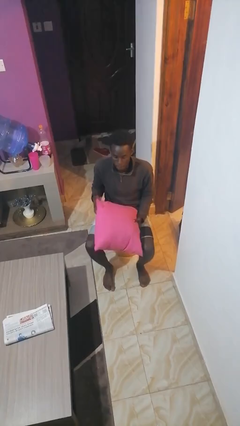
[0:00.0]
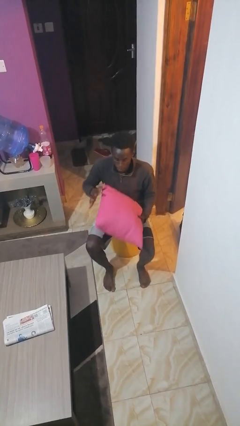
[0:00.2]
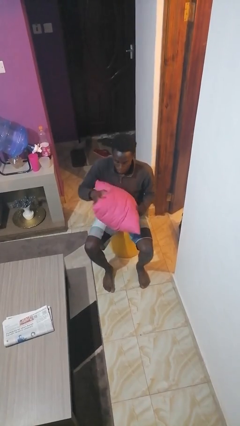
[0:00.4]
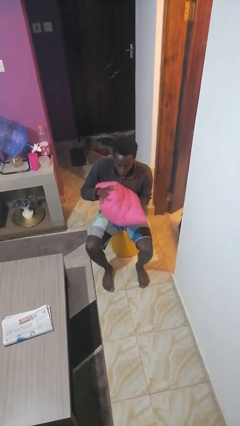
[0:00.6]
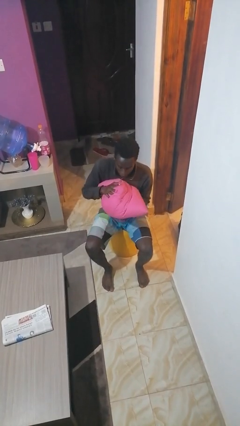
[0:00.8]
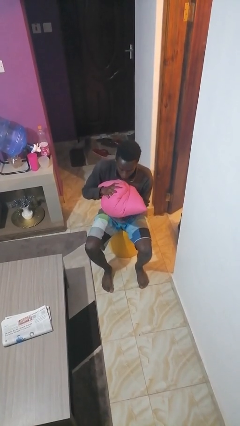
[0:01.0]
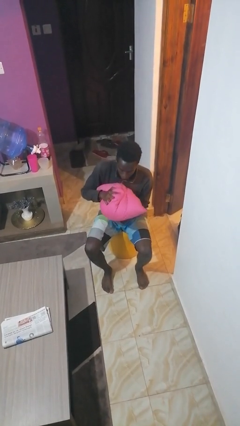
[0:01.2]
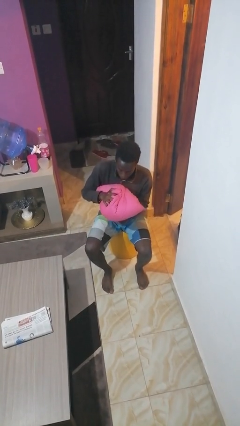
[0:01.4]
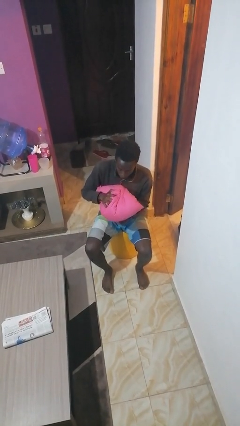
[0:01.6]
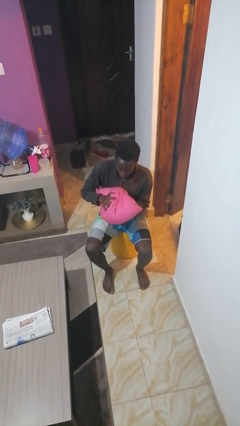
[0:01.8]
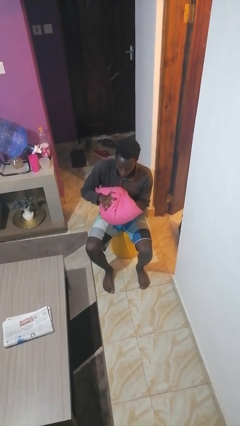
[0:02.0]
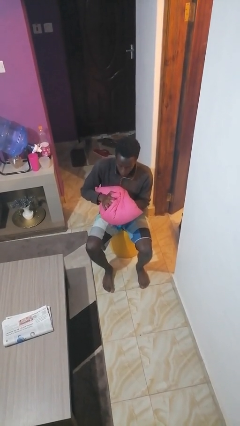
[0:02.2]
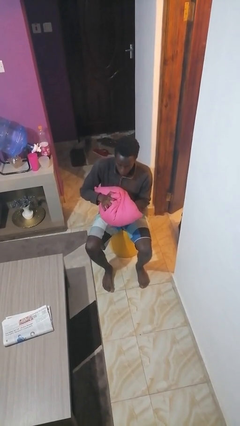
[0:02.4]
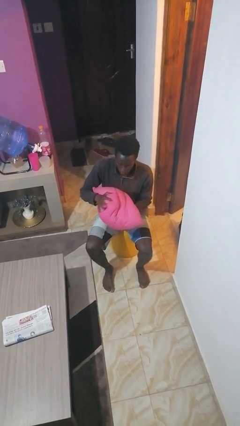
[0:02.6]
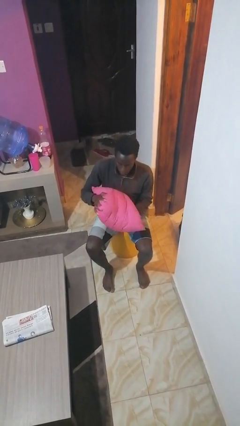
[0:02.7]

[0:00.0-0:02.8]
person squeezes object

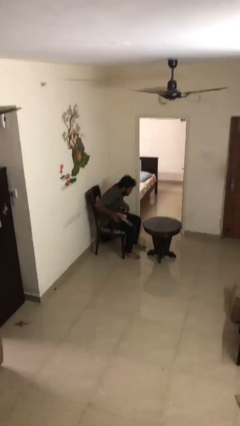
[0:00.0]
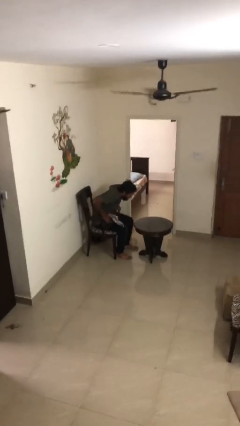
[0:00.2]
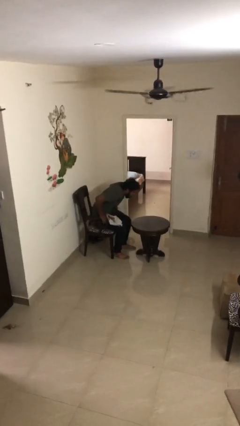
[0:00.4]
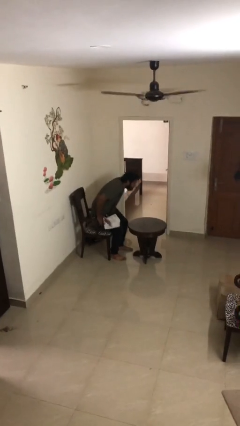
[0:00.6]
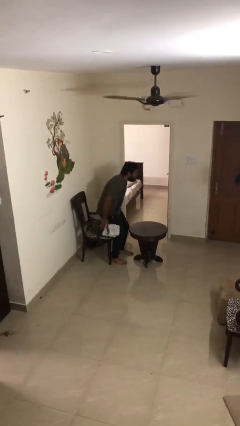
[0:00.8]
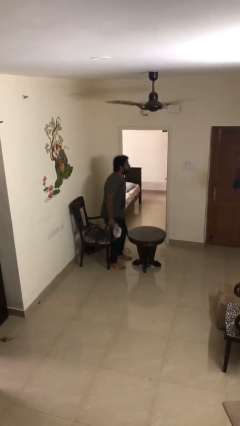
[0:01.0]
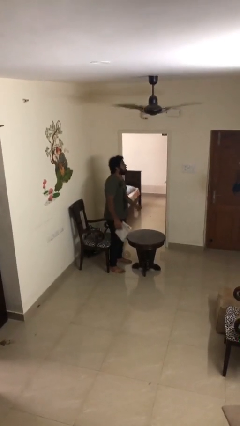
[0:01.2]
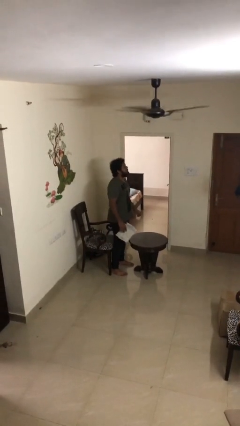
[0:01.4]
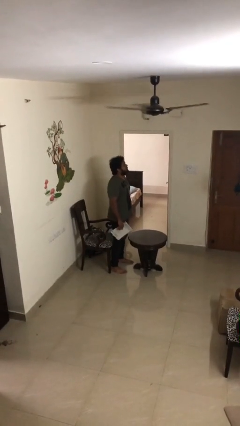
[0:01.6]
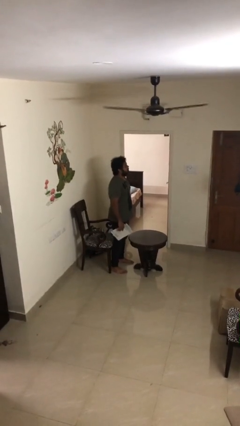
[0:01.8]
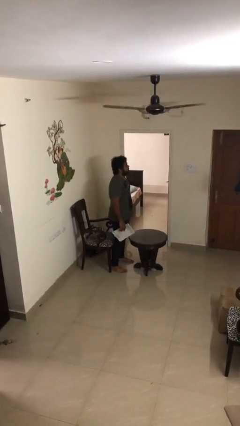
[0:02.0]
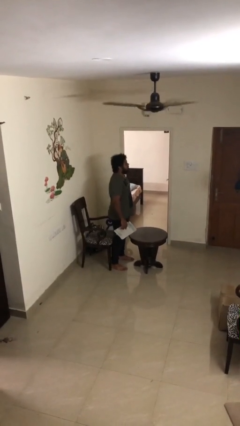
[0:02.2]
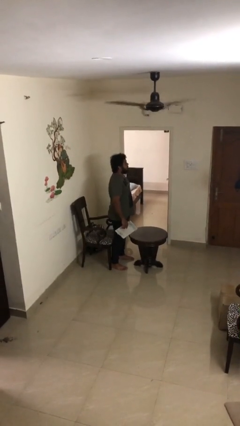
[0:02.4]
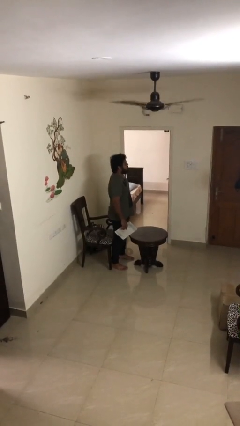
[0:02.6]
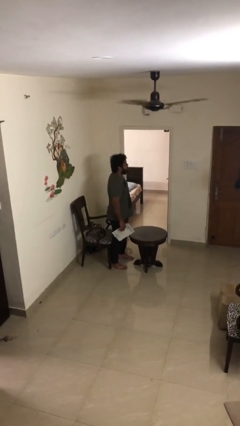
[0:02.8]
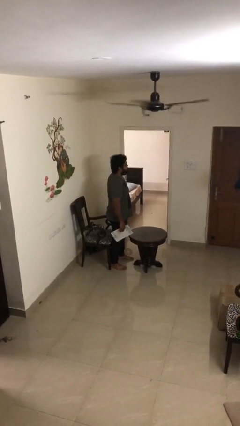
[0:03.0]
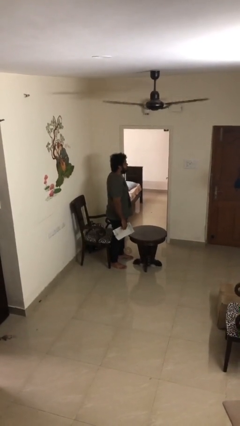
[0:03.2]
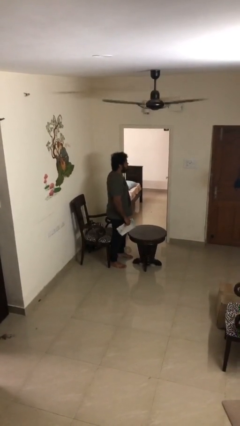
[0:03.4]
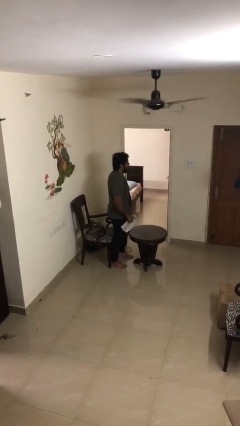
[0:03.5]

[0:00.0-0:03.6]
person stands up

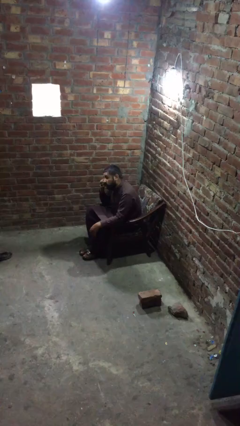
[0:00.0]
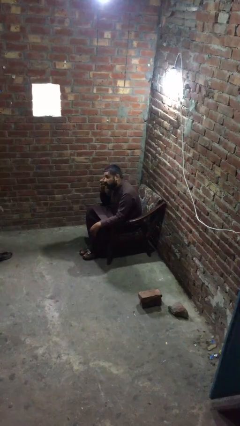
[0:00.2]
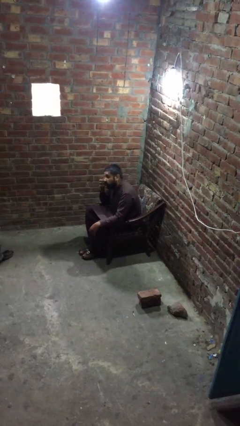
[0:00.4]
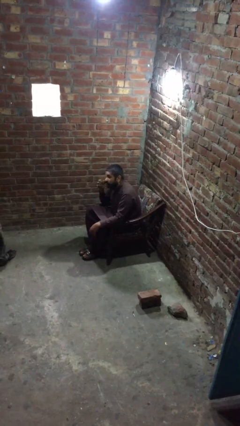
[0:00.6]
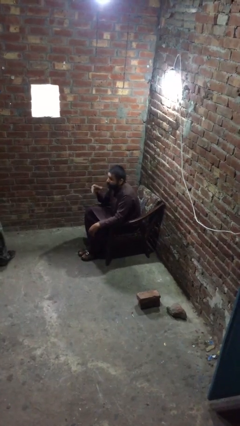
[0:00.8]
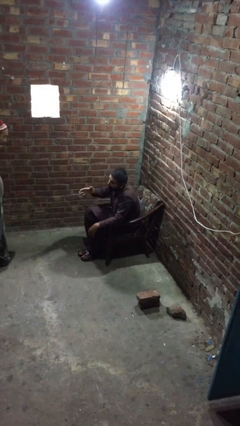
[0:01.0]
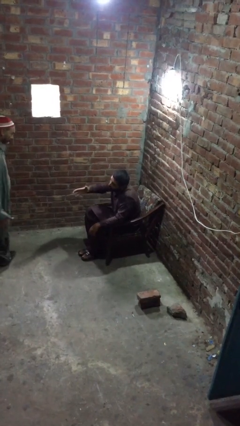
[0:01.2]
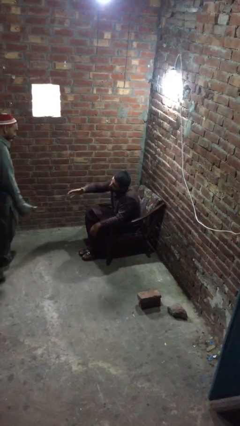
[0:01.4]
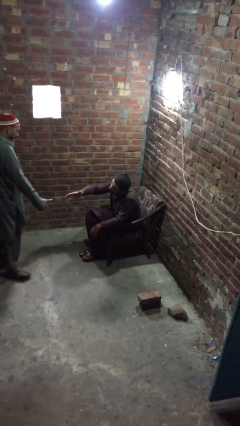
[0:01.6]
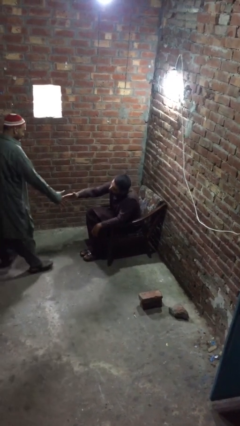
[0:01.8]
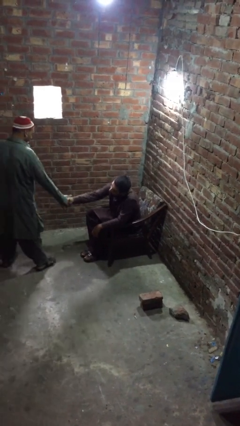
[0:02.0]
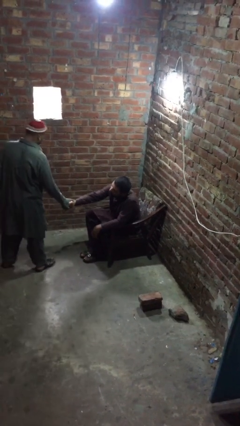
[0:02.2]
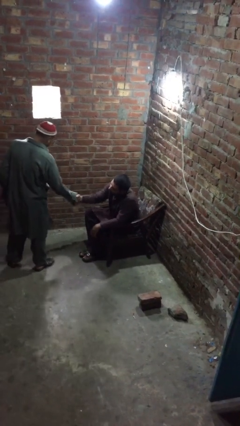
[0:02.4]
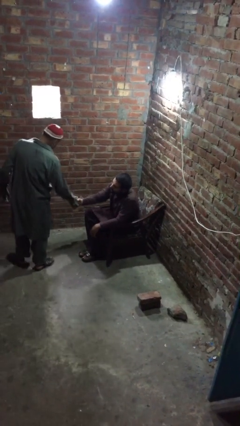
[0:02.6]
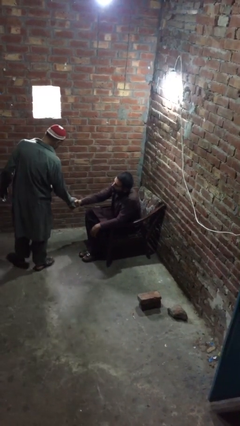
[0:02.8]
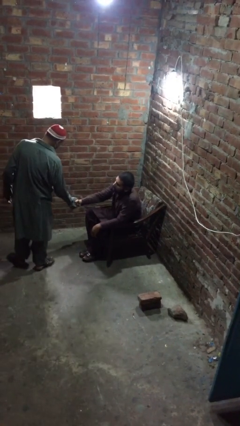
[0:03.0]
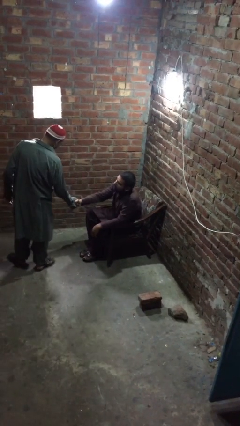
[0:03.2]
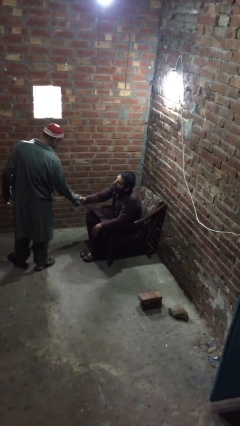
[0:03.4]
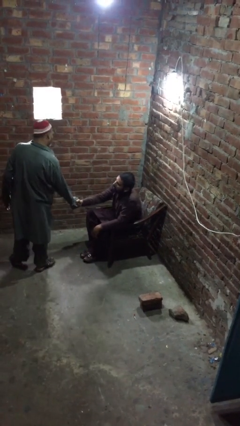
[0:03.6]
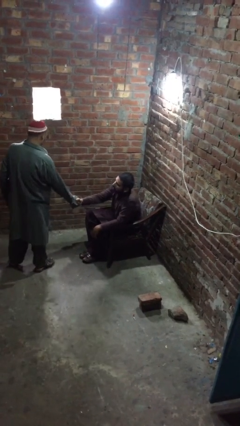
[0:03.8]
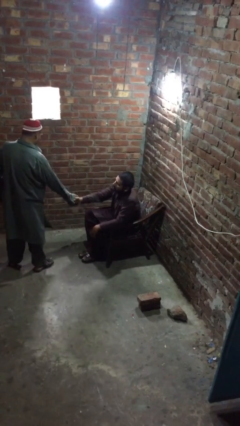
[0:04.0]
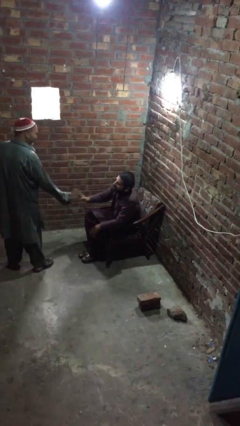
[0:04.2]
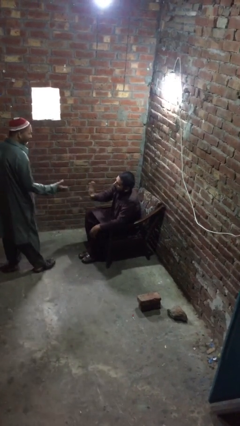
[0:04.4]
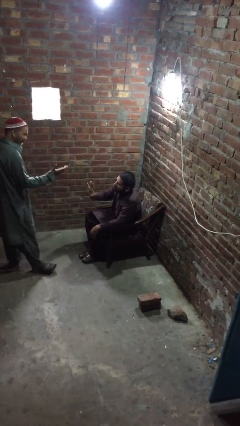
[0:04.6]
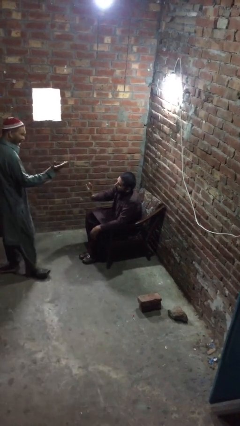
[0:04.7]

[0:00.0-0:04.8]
person shakes hand

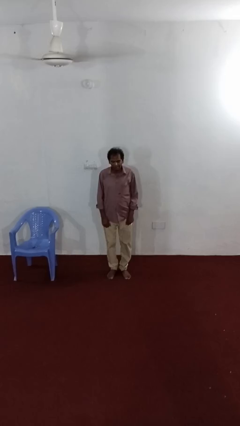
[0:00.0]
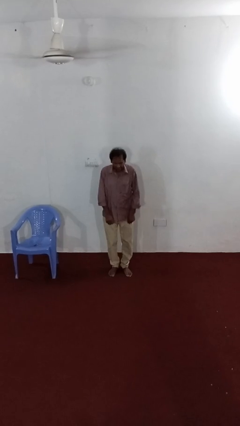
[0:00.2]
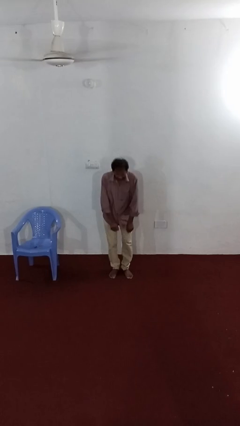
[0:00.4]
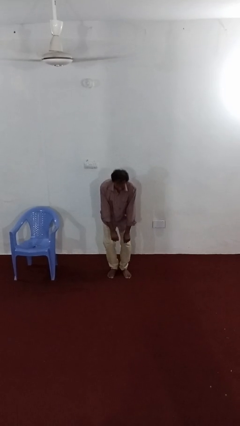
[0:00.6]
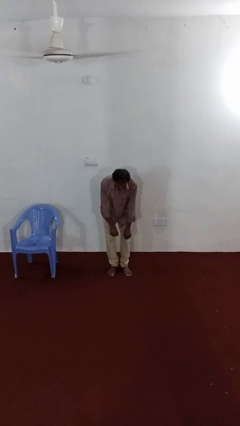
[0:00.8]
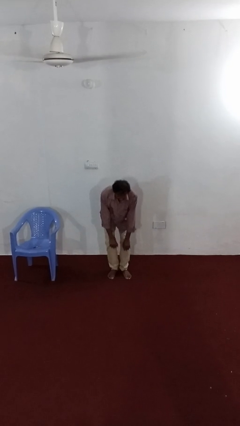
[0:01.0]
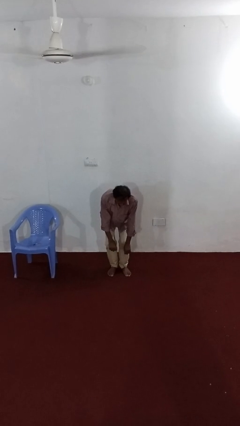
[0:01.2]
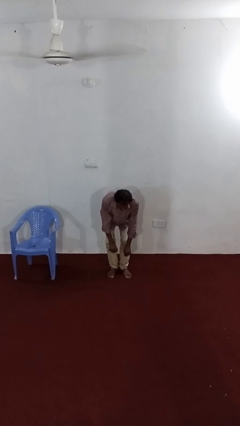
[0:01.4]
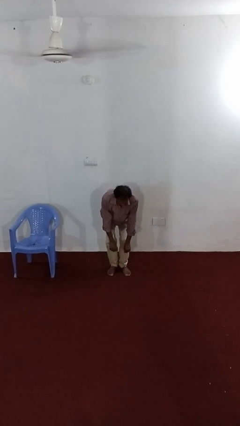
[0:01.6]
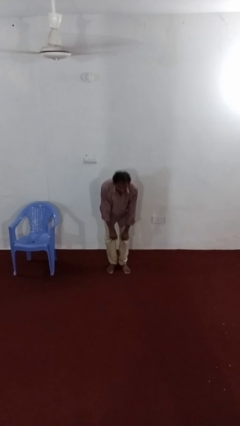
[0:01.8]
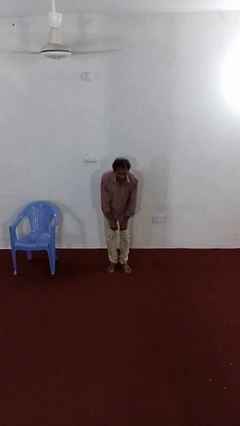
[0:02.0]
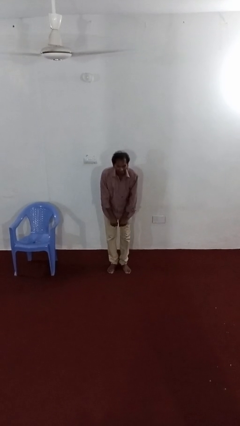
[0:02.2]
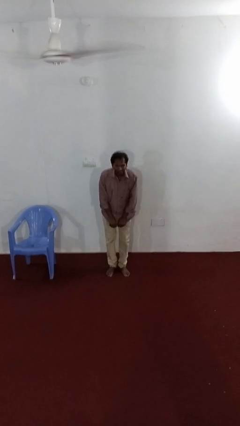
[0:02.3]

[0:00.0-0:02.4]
person dances in place

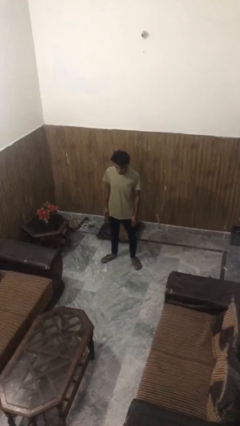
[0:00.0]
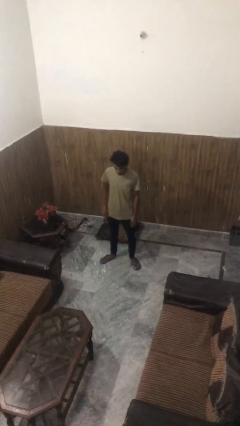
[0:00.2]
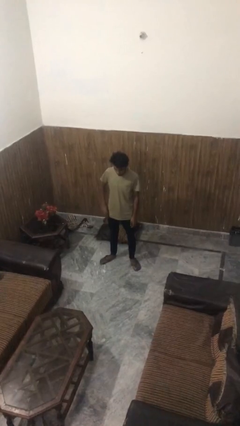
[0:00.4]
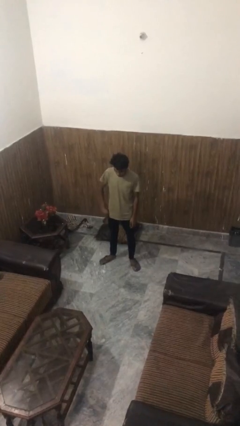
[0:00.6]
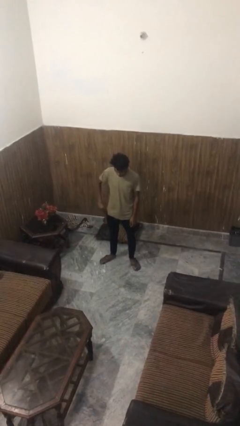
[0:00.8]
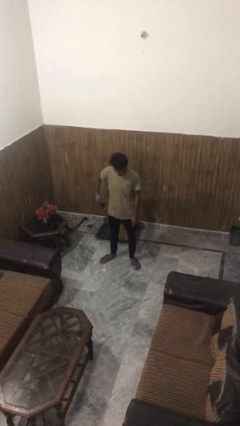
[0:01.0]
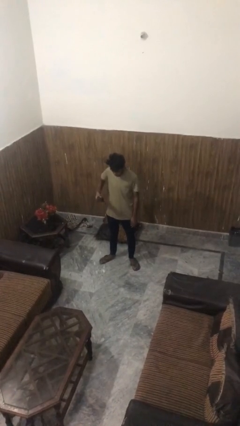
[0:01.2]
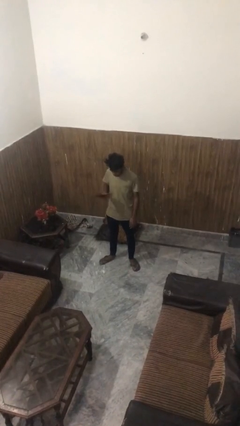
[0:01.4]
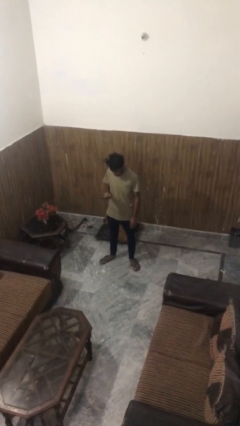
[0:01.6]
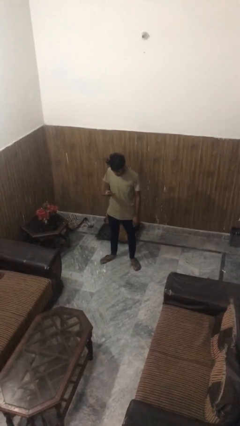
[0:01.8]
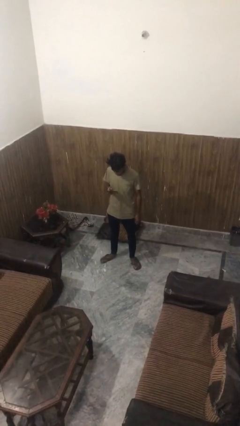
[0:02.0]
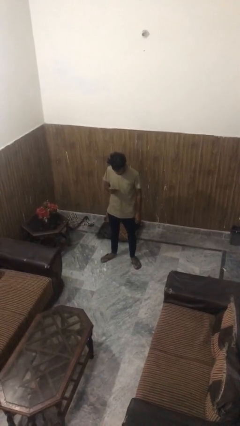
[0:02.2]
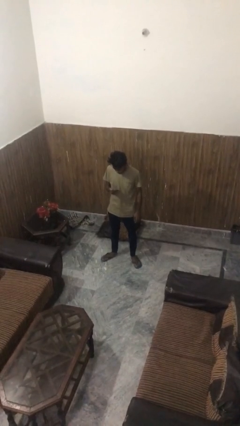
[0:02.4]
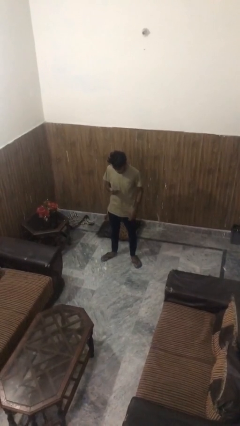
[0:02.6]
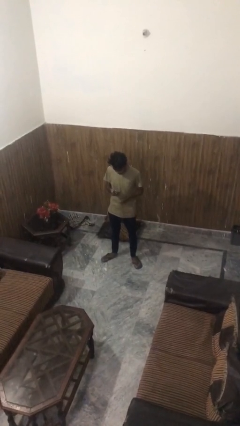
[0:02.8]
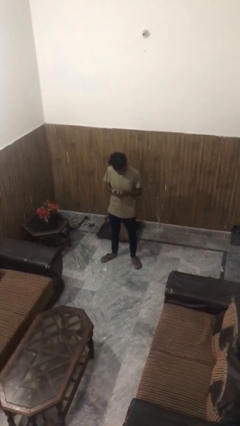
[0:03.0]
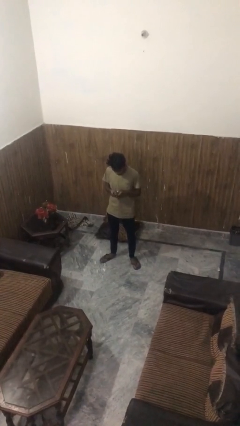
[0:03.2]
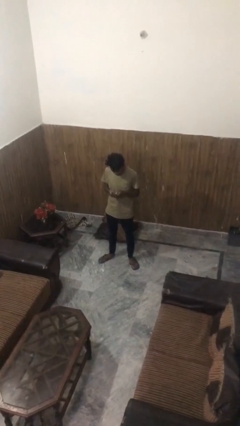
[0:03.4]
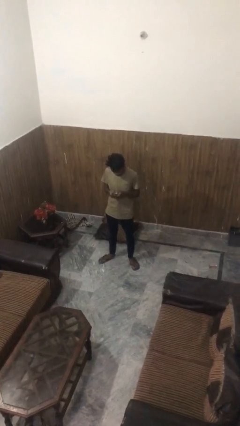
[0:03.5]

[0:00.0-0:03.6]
person takes phone from pocket

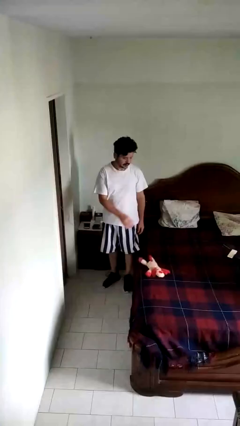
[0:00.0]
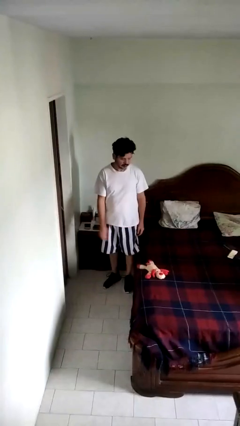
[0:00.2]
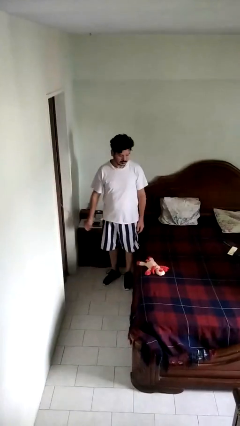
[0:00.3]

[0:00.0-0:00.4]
person throws object on bed

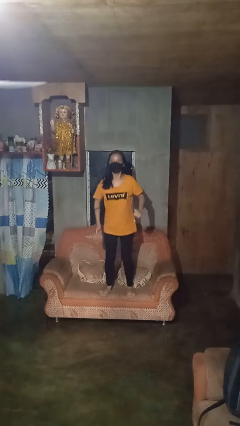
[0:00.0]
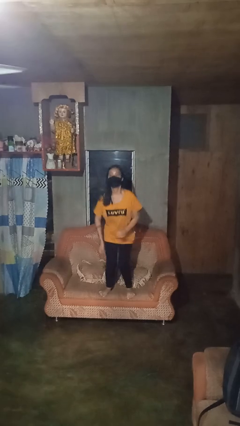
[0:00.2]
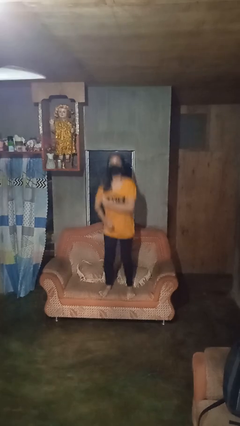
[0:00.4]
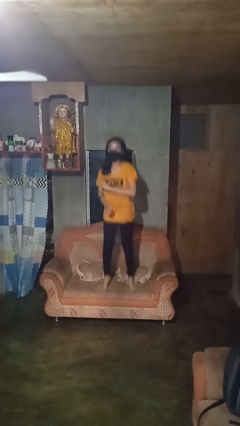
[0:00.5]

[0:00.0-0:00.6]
person jumps on couch
